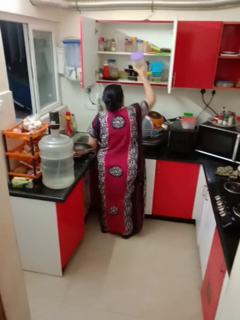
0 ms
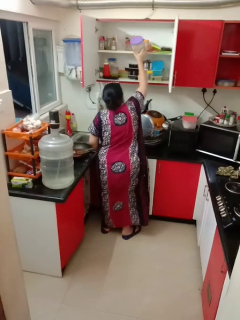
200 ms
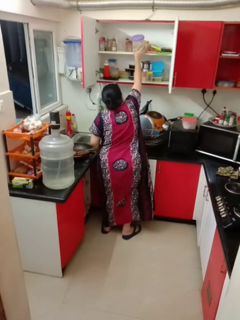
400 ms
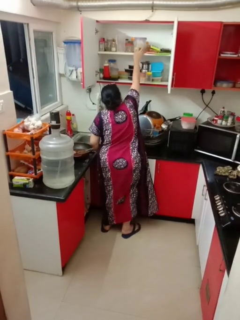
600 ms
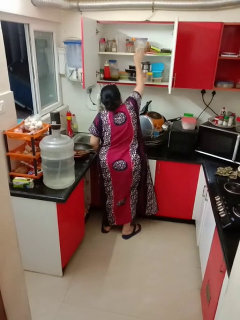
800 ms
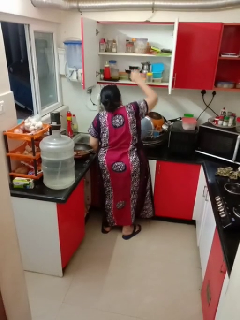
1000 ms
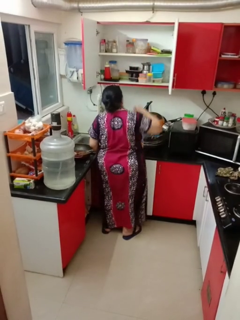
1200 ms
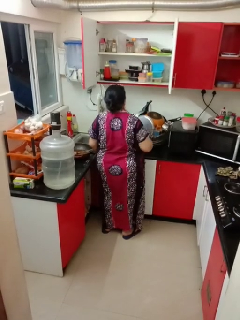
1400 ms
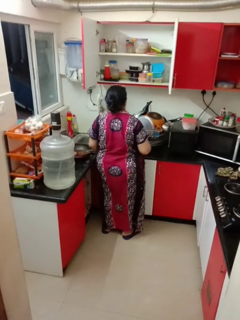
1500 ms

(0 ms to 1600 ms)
person puts object in cabinet

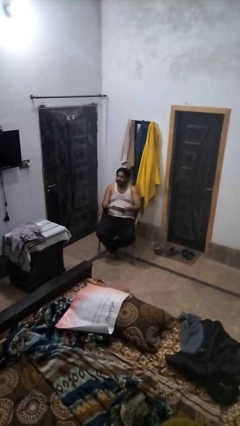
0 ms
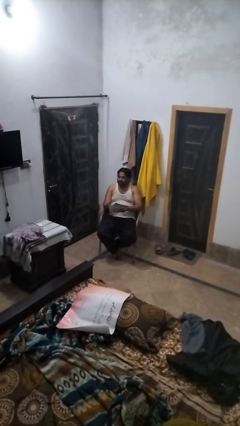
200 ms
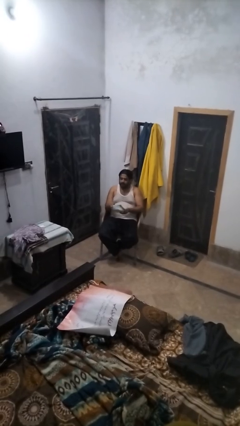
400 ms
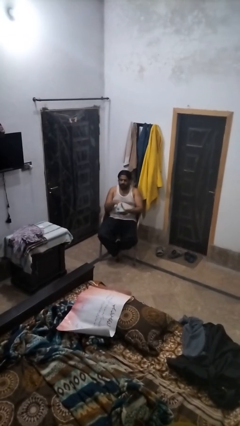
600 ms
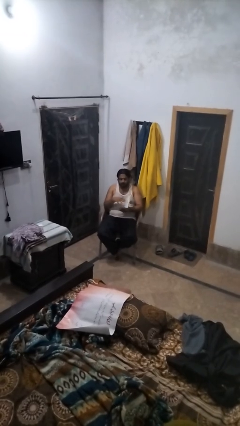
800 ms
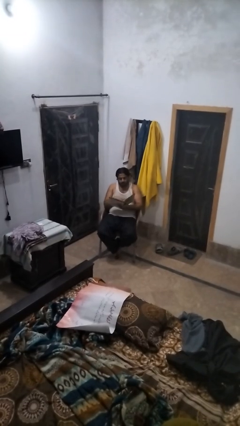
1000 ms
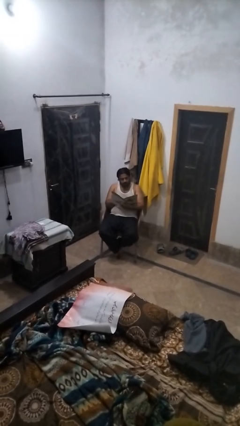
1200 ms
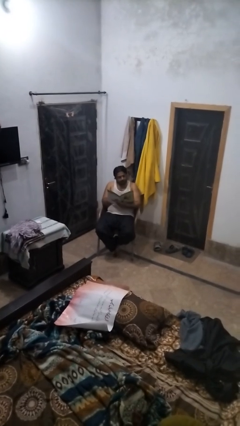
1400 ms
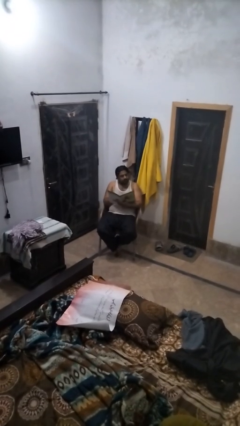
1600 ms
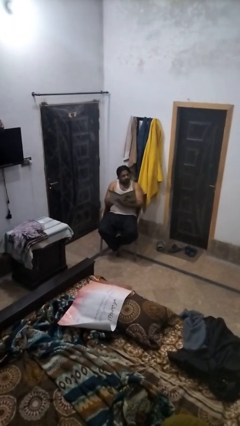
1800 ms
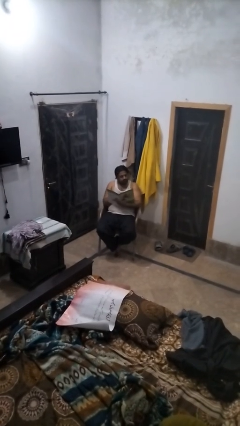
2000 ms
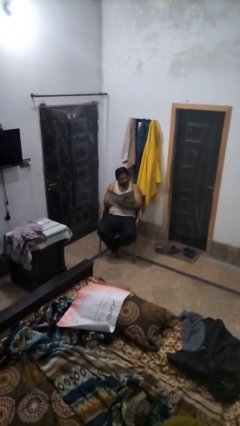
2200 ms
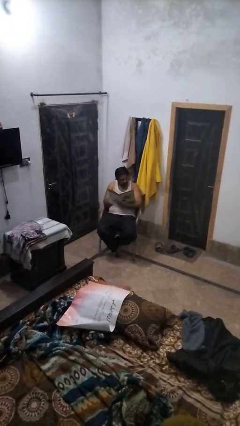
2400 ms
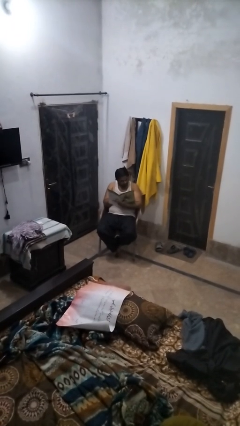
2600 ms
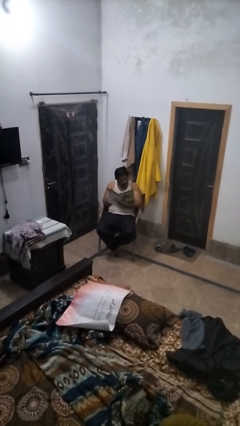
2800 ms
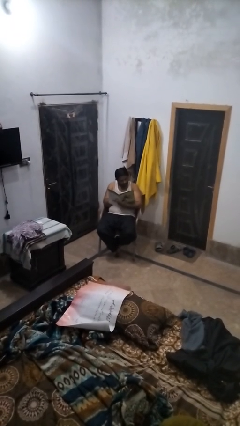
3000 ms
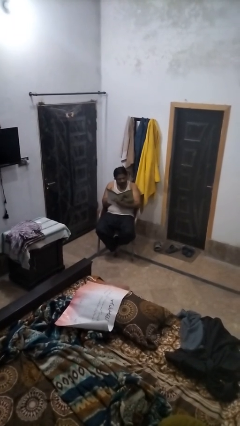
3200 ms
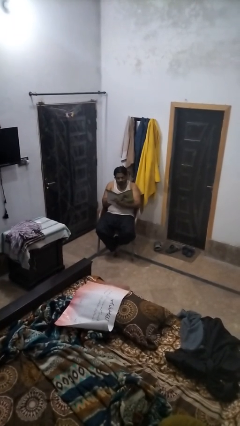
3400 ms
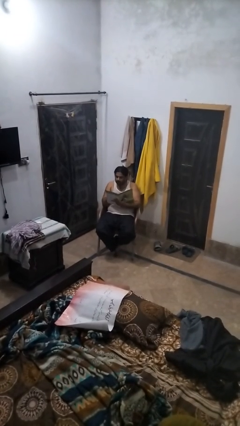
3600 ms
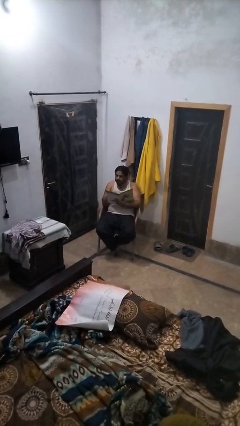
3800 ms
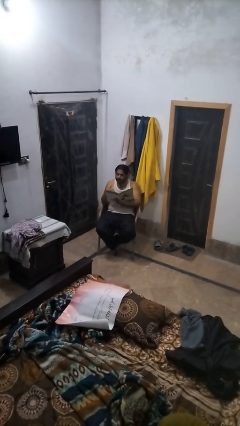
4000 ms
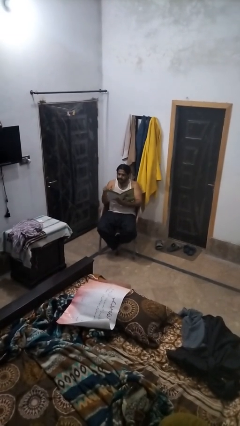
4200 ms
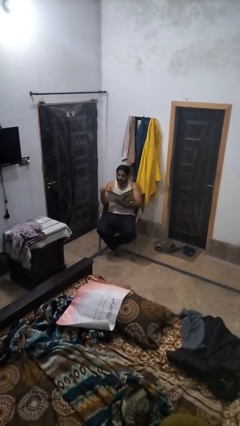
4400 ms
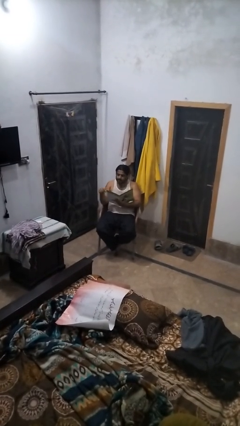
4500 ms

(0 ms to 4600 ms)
person reads magazine

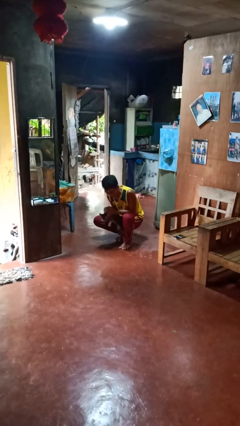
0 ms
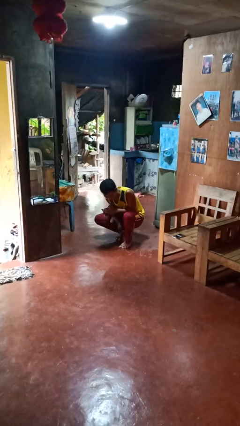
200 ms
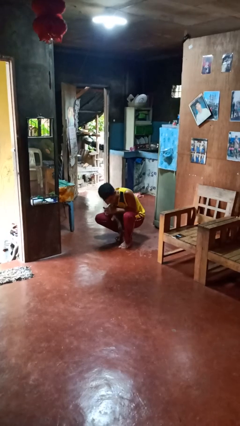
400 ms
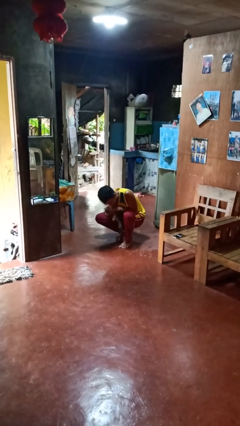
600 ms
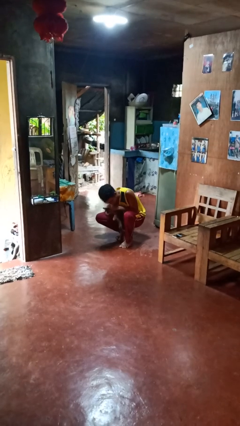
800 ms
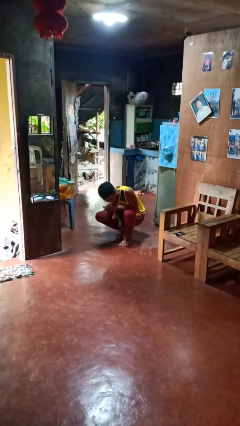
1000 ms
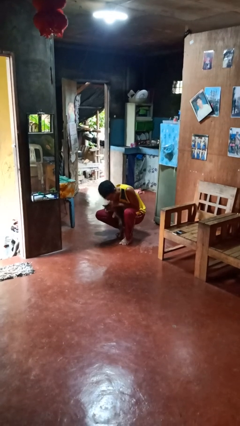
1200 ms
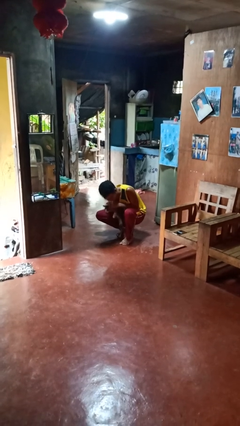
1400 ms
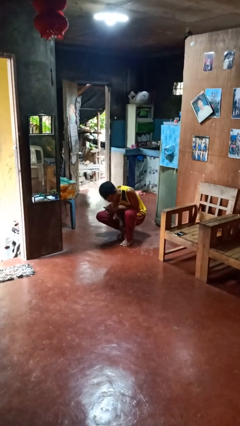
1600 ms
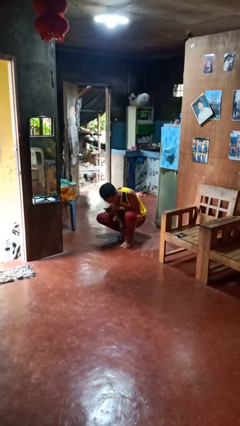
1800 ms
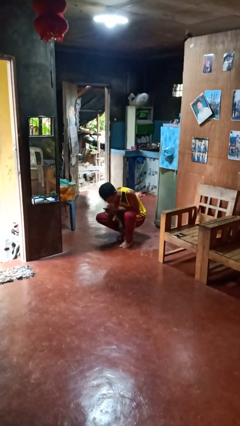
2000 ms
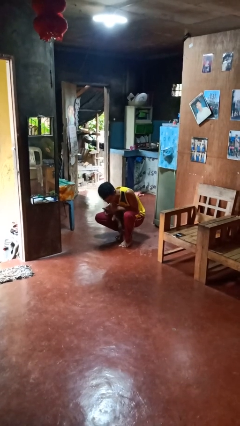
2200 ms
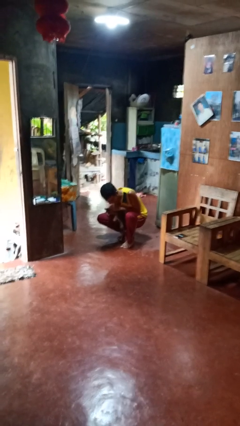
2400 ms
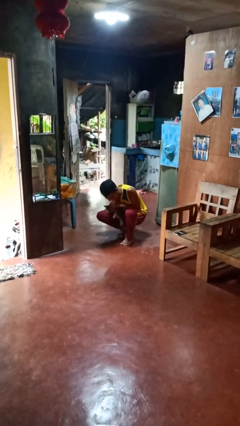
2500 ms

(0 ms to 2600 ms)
person hugs cat

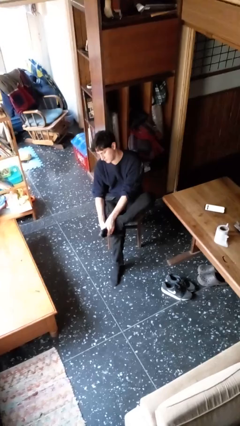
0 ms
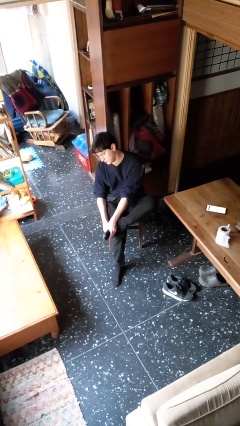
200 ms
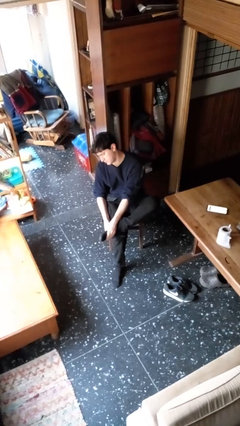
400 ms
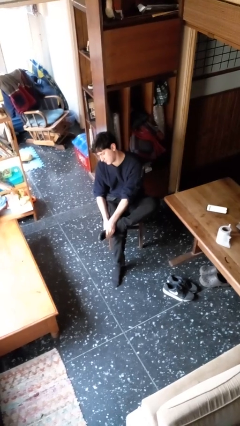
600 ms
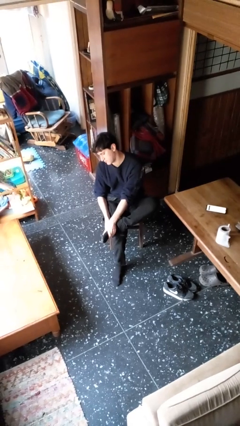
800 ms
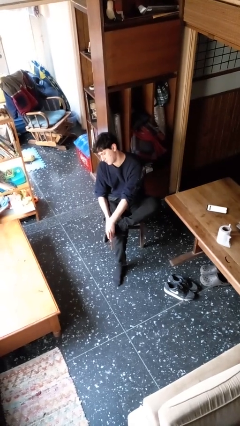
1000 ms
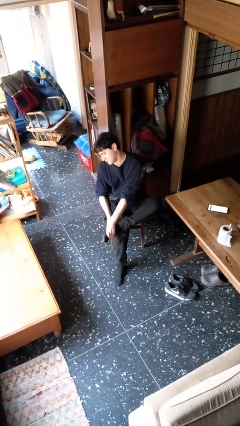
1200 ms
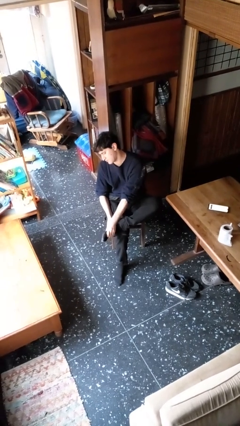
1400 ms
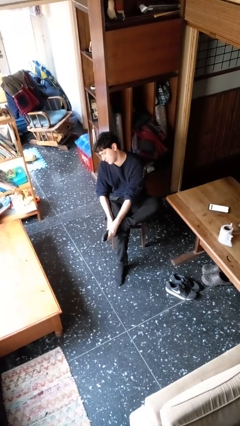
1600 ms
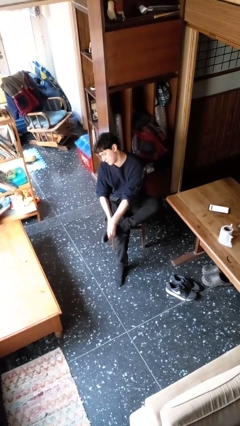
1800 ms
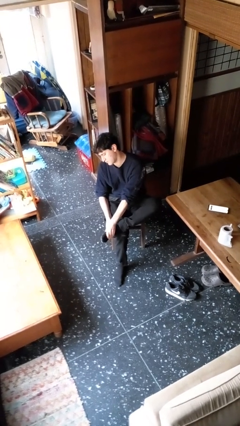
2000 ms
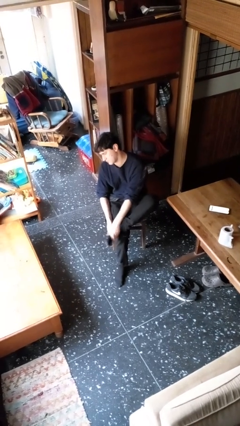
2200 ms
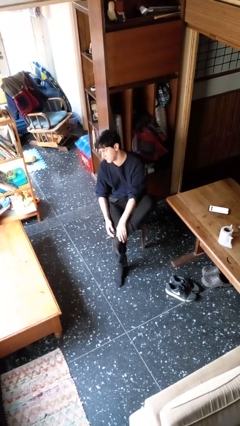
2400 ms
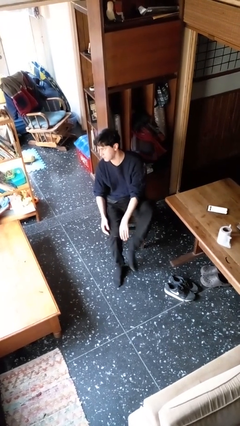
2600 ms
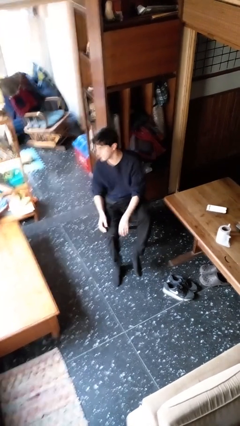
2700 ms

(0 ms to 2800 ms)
person rubs foot

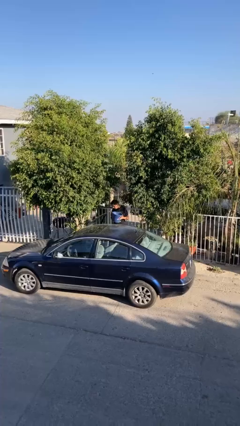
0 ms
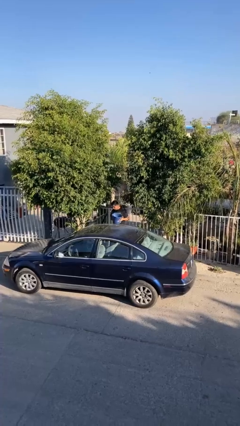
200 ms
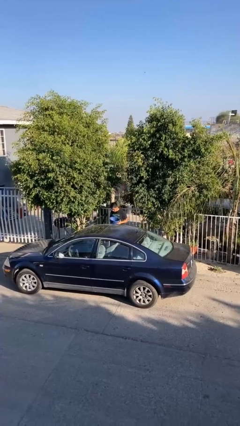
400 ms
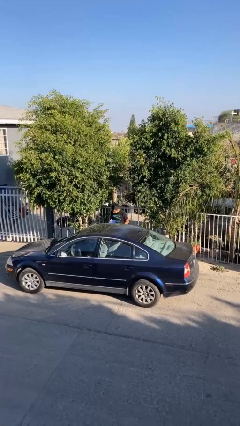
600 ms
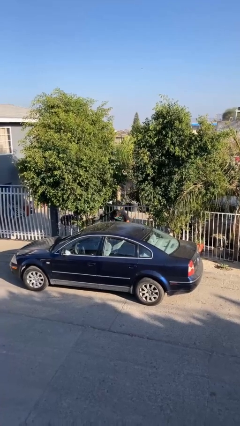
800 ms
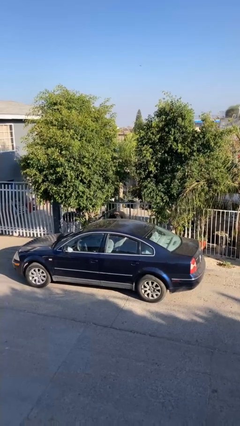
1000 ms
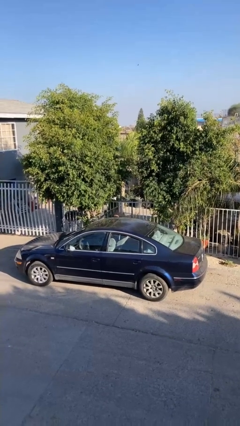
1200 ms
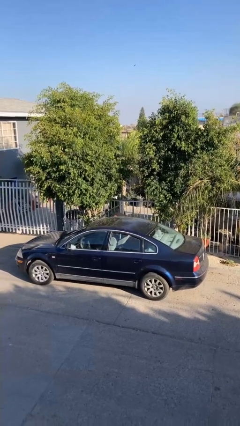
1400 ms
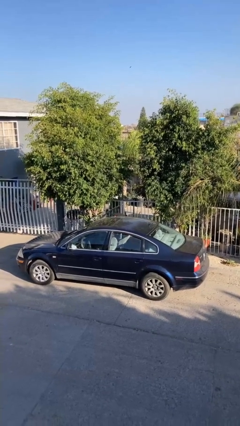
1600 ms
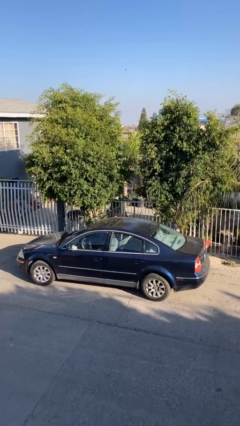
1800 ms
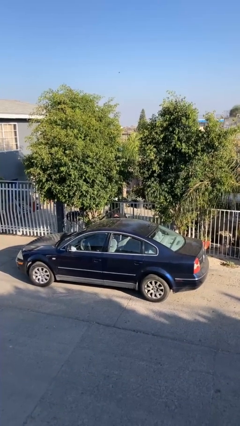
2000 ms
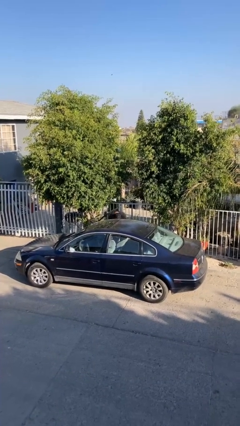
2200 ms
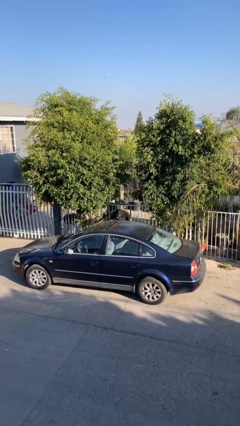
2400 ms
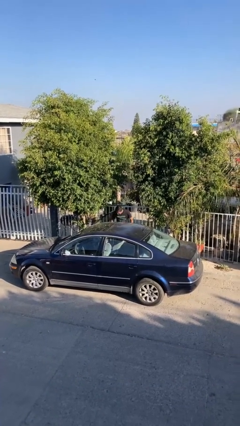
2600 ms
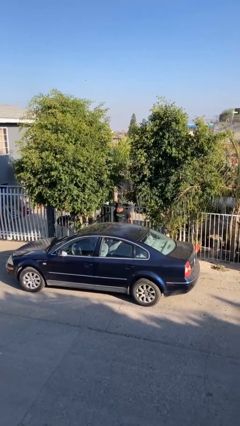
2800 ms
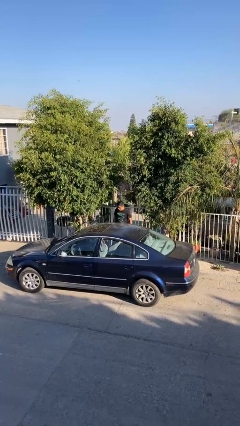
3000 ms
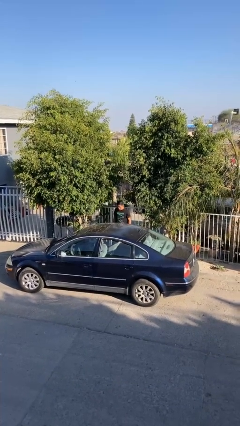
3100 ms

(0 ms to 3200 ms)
person loads car

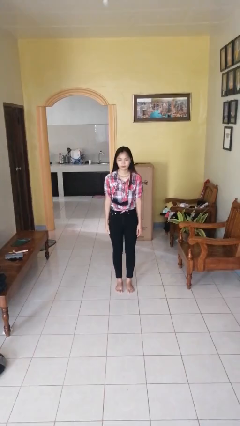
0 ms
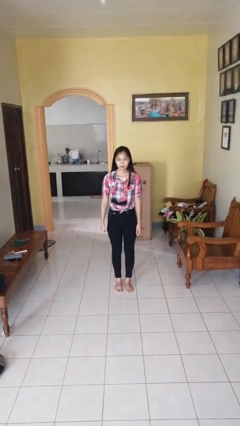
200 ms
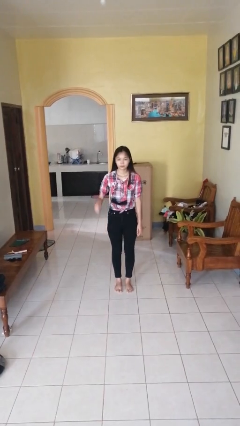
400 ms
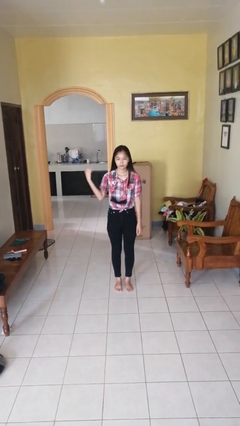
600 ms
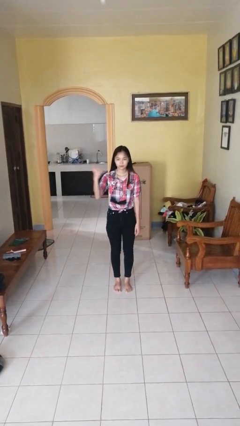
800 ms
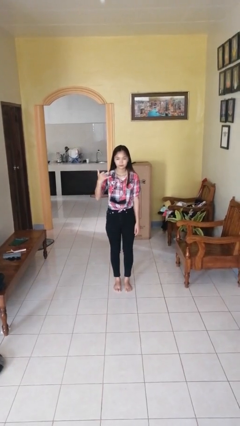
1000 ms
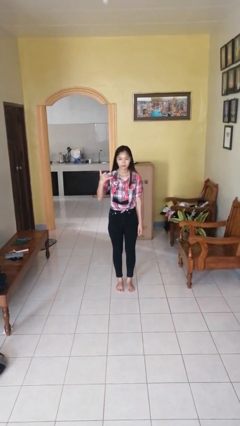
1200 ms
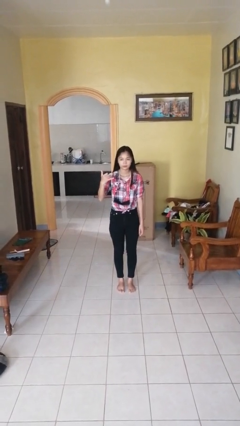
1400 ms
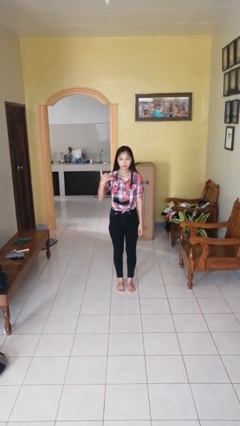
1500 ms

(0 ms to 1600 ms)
person gestures hang loose

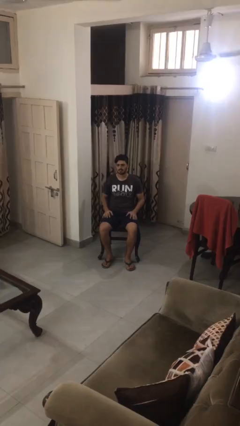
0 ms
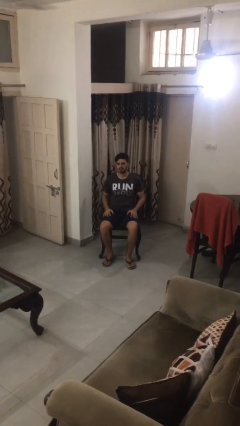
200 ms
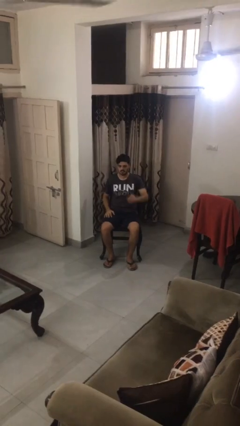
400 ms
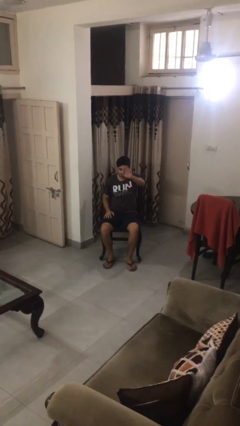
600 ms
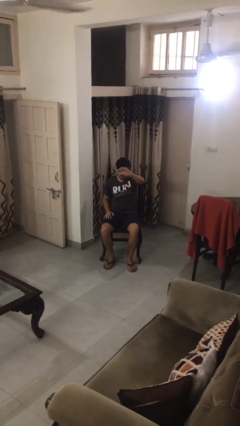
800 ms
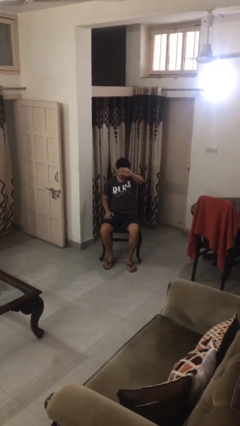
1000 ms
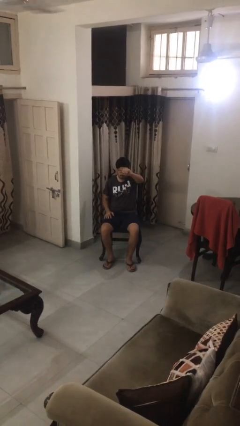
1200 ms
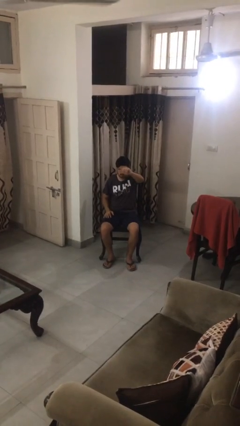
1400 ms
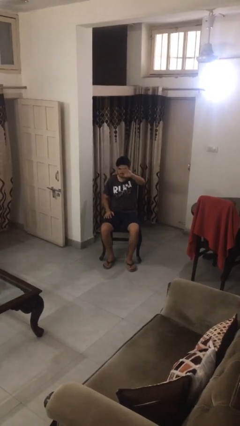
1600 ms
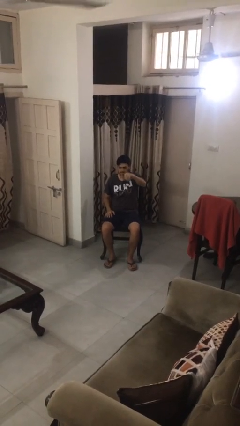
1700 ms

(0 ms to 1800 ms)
person gestures come here
